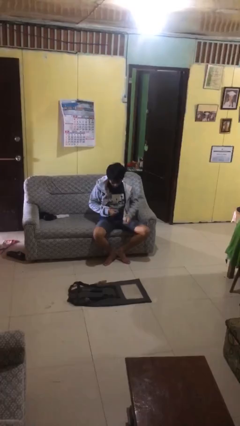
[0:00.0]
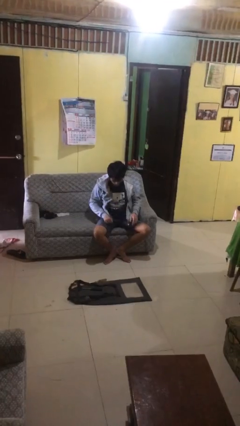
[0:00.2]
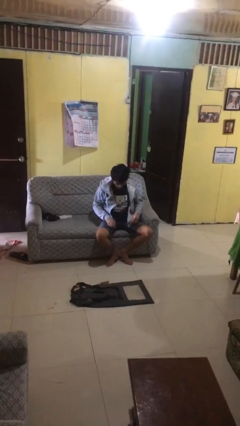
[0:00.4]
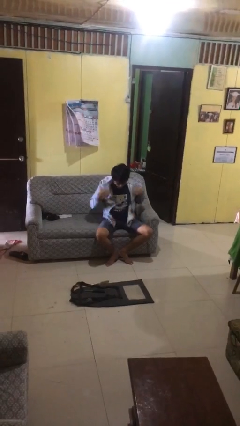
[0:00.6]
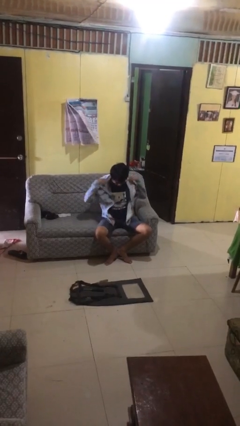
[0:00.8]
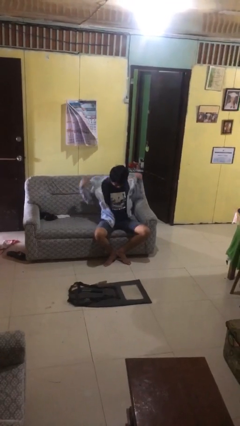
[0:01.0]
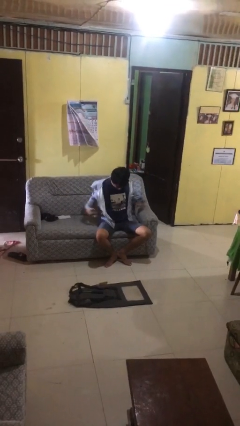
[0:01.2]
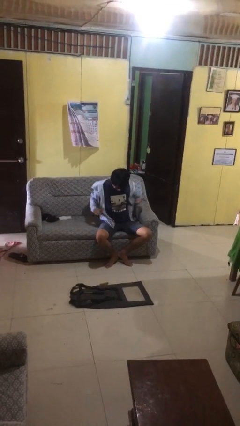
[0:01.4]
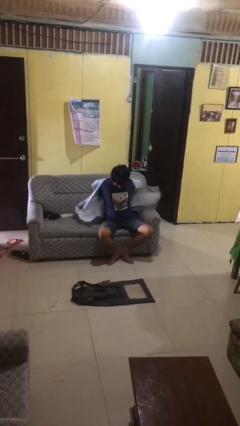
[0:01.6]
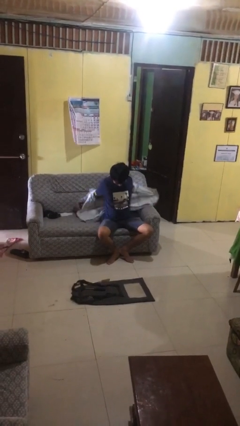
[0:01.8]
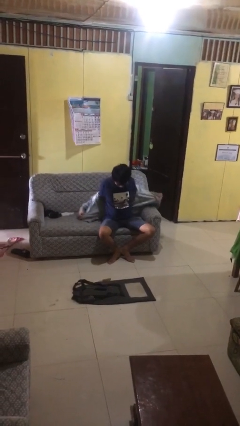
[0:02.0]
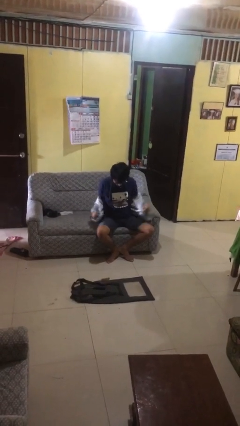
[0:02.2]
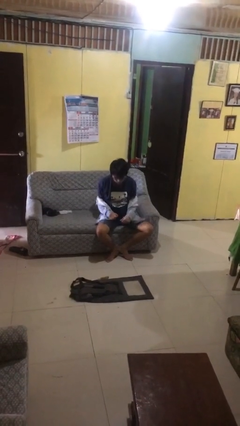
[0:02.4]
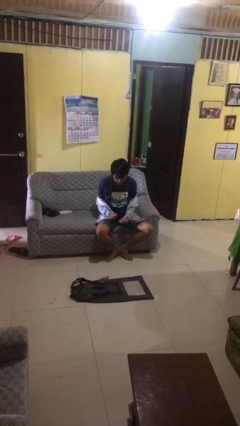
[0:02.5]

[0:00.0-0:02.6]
person takes off jacket

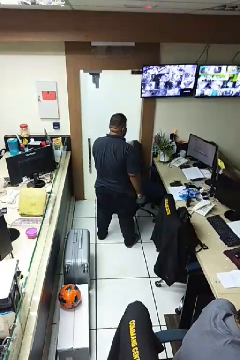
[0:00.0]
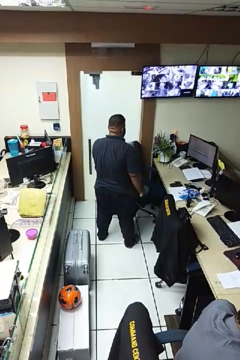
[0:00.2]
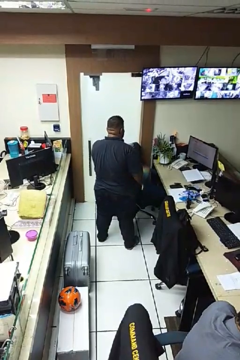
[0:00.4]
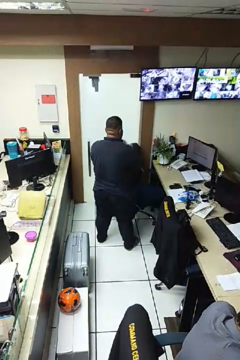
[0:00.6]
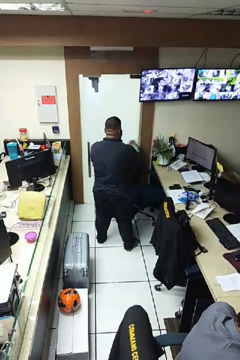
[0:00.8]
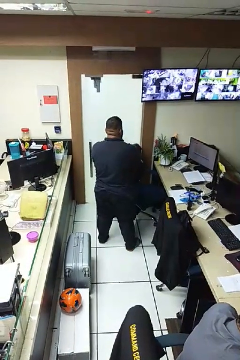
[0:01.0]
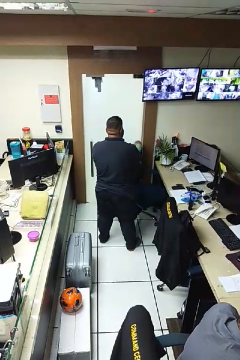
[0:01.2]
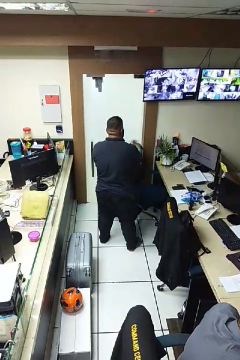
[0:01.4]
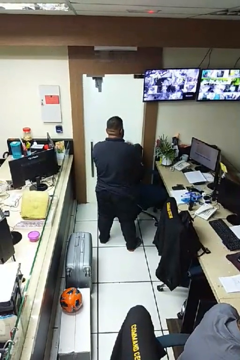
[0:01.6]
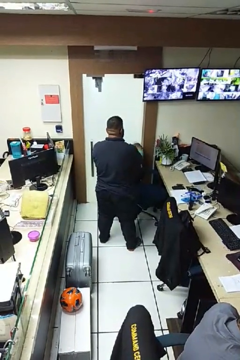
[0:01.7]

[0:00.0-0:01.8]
person dusts furniture

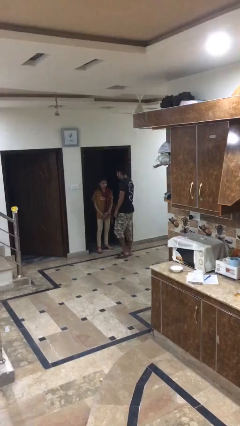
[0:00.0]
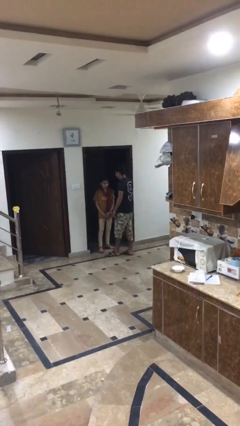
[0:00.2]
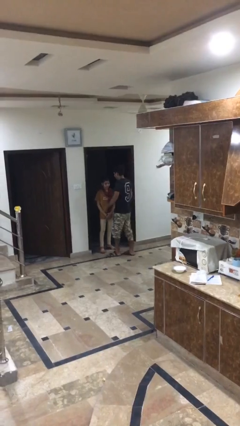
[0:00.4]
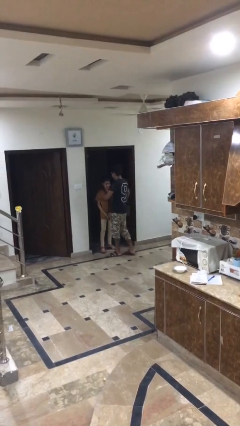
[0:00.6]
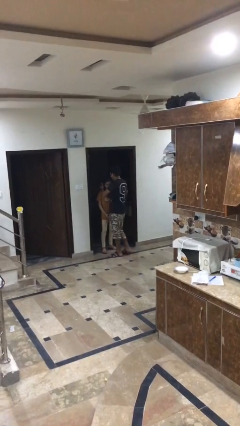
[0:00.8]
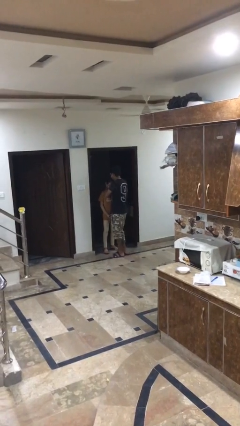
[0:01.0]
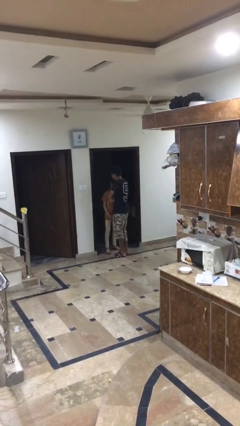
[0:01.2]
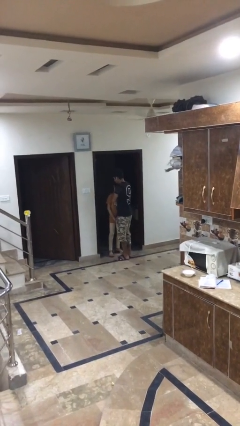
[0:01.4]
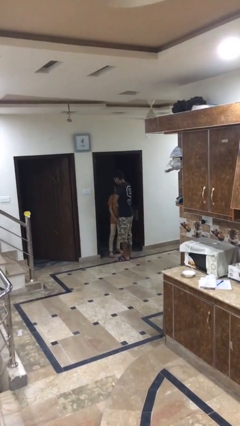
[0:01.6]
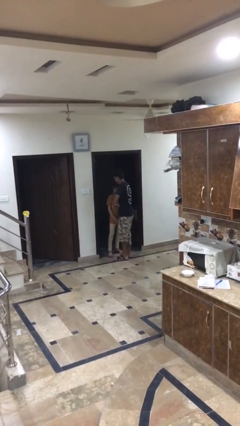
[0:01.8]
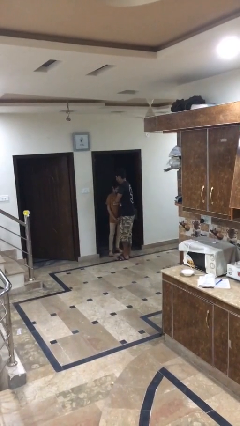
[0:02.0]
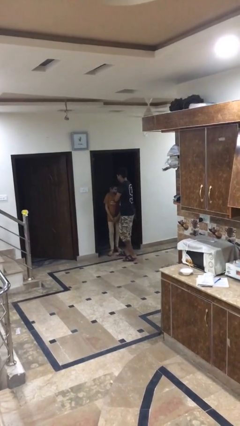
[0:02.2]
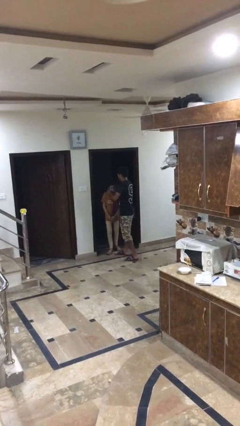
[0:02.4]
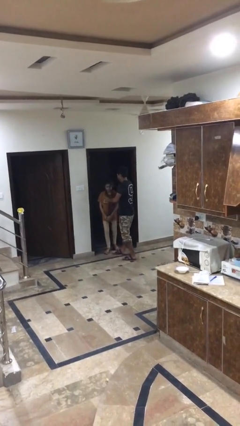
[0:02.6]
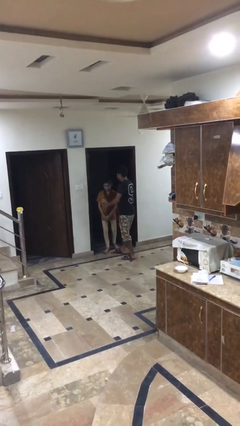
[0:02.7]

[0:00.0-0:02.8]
person embraces person

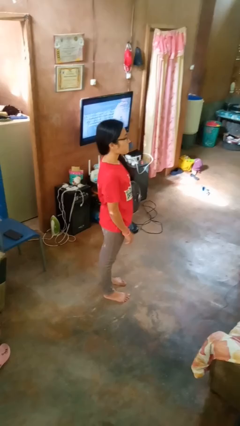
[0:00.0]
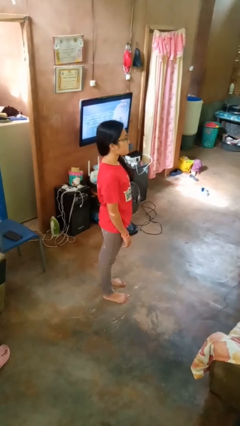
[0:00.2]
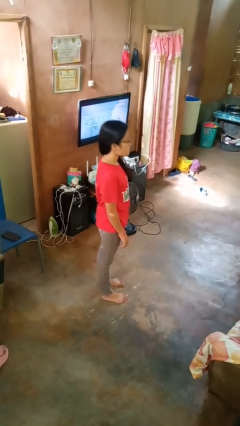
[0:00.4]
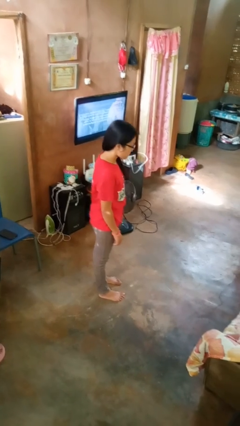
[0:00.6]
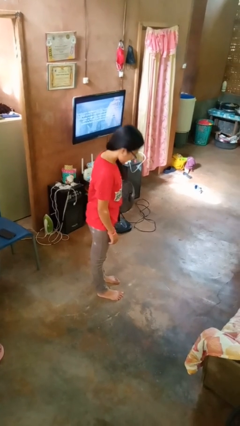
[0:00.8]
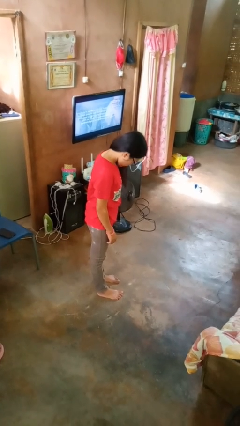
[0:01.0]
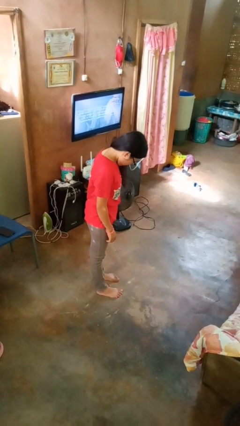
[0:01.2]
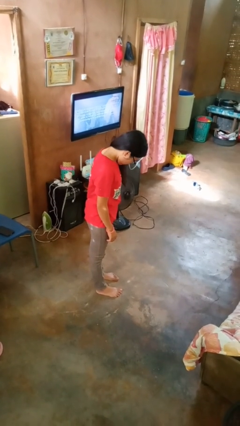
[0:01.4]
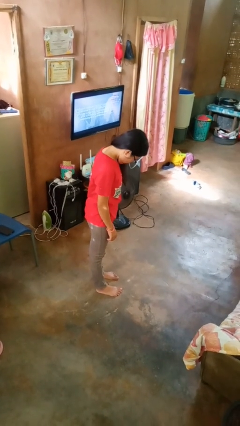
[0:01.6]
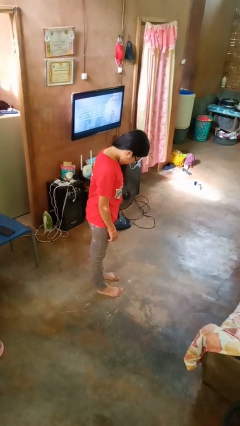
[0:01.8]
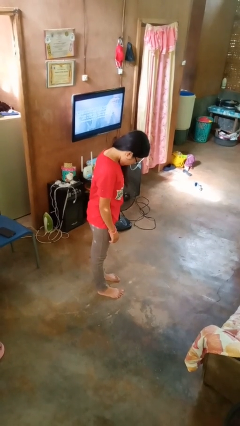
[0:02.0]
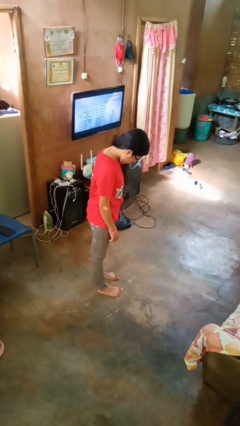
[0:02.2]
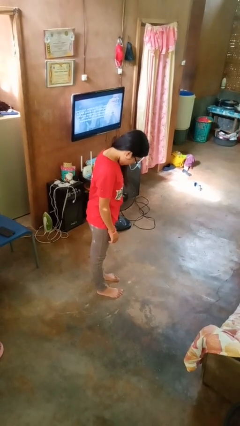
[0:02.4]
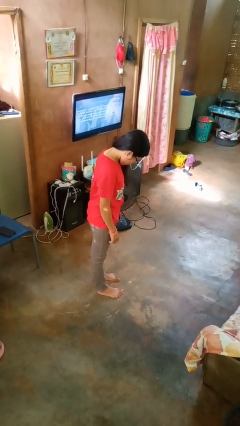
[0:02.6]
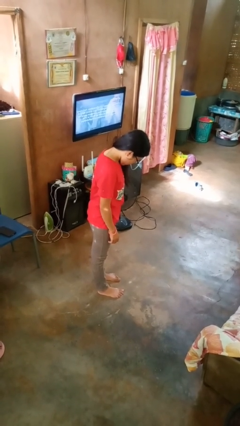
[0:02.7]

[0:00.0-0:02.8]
person bows

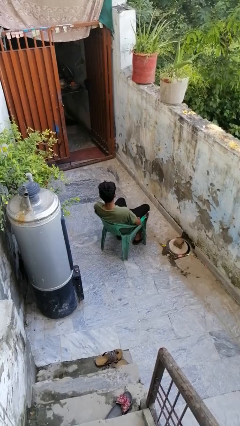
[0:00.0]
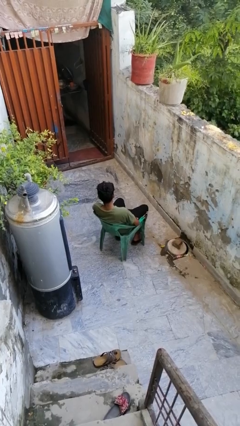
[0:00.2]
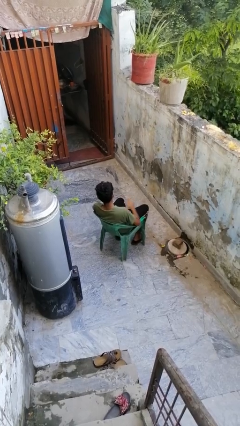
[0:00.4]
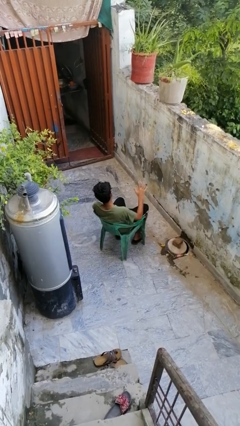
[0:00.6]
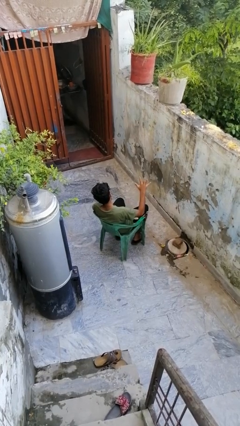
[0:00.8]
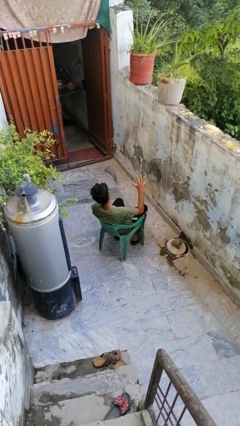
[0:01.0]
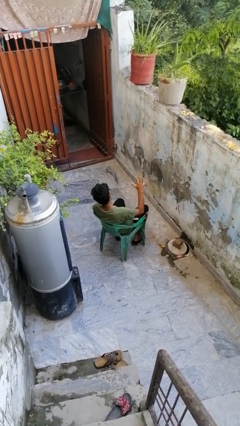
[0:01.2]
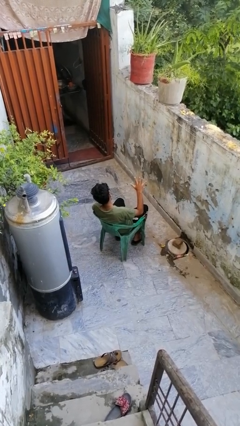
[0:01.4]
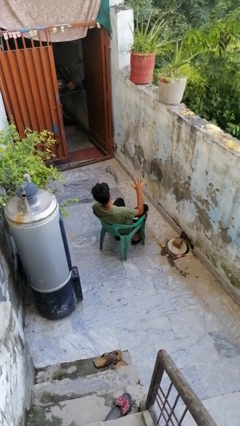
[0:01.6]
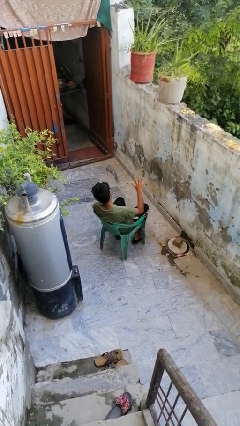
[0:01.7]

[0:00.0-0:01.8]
person gestures number five

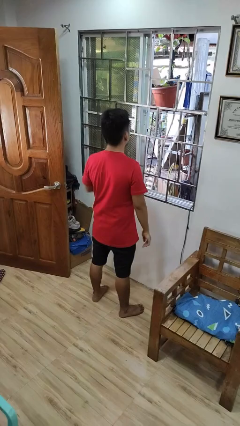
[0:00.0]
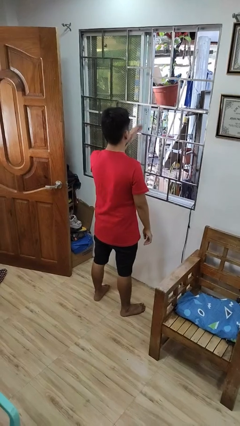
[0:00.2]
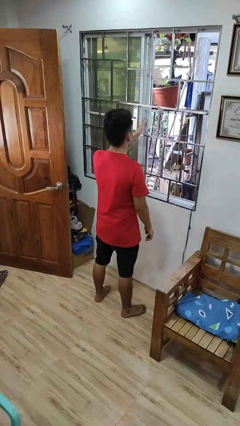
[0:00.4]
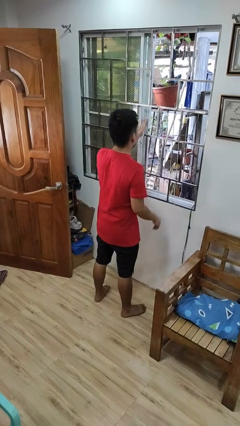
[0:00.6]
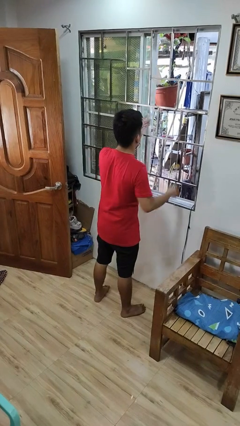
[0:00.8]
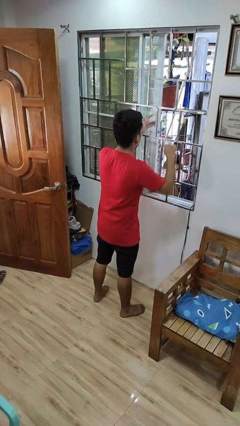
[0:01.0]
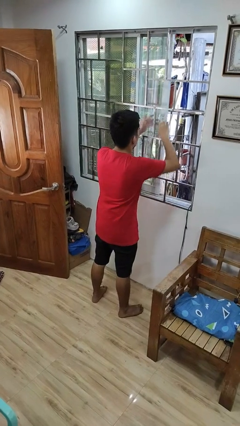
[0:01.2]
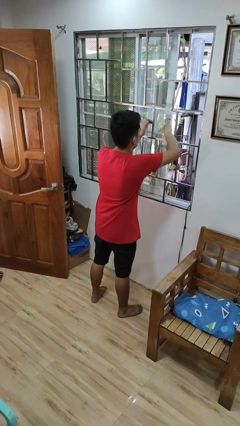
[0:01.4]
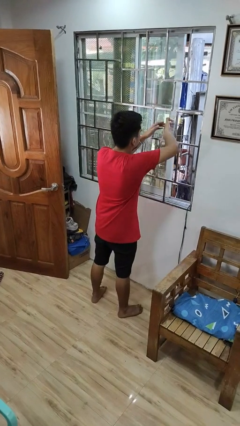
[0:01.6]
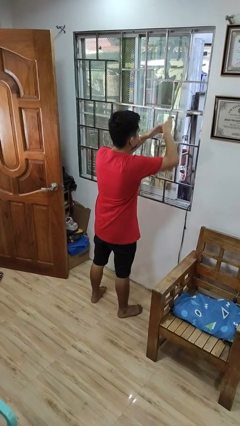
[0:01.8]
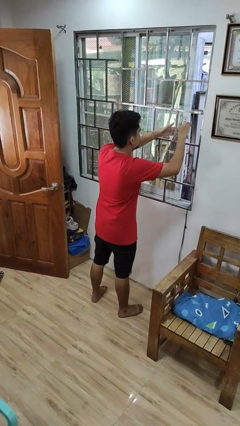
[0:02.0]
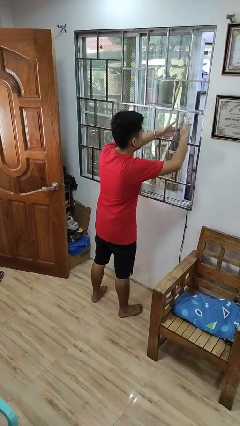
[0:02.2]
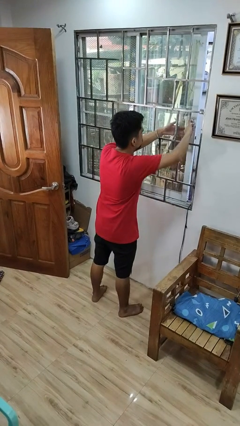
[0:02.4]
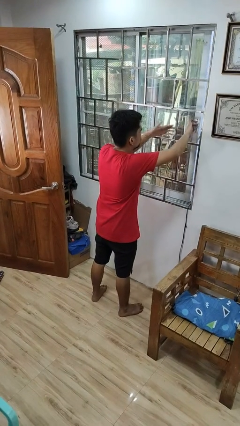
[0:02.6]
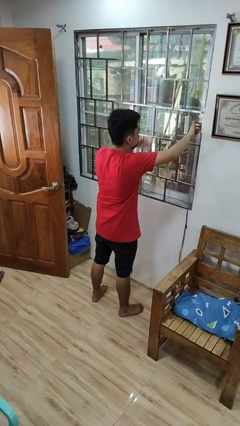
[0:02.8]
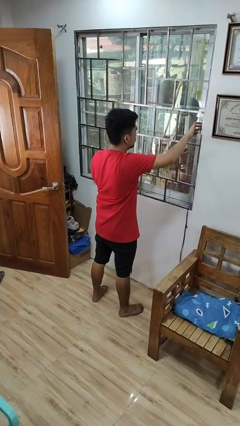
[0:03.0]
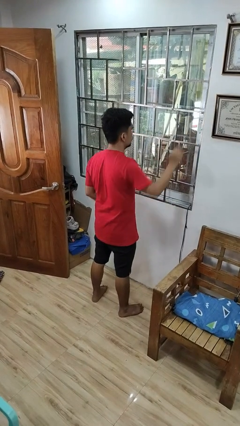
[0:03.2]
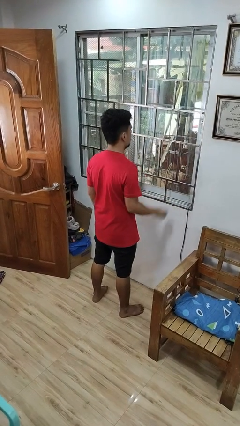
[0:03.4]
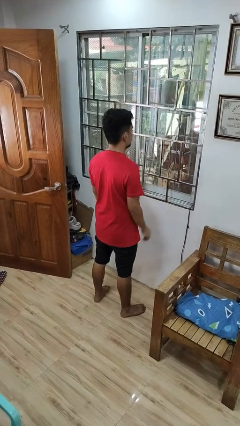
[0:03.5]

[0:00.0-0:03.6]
person closes home window

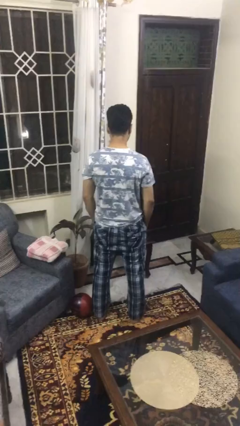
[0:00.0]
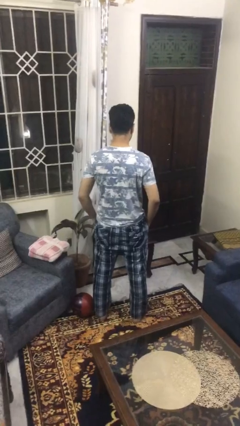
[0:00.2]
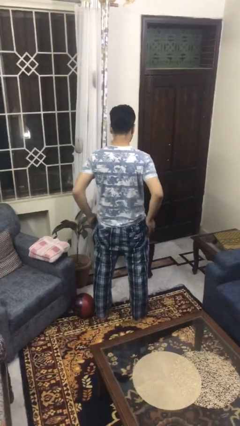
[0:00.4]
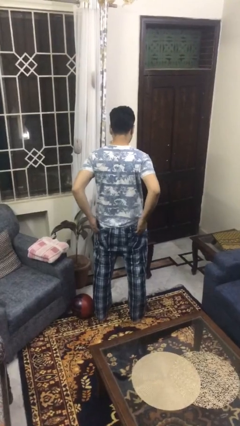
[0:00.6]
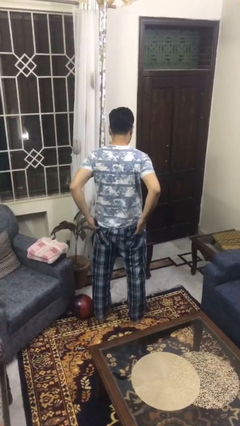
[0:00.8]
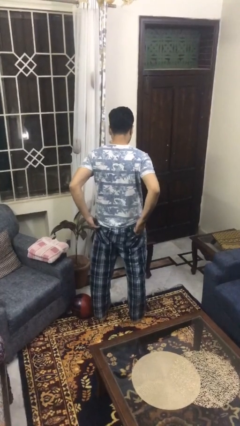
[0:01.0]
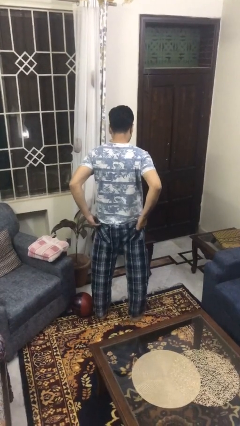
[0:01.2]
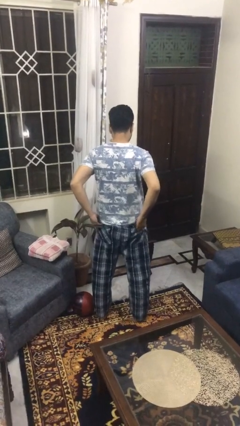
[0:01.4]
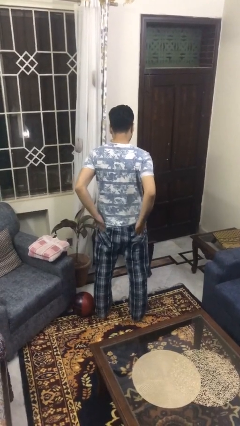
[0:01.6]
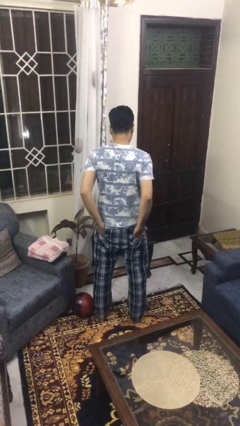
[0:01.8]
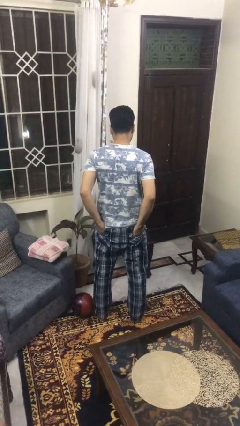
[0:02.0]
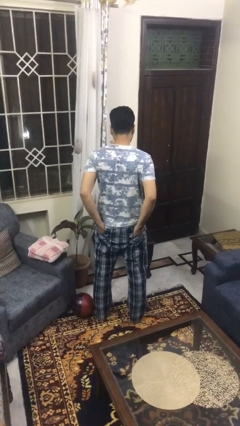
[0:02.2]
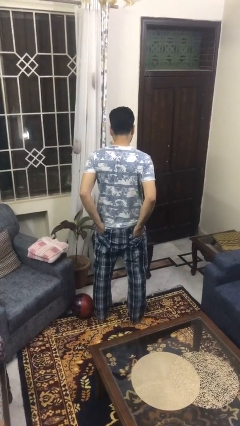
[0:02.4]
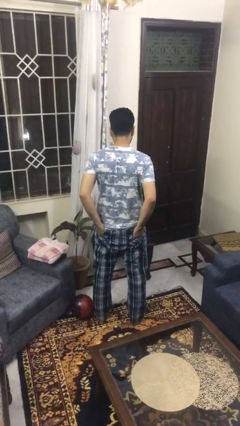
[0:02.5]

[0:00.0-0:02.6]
person puts hands in back pockets
